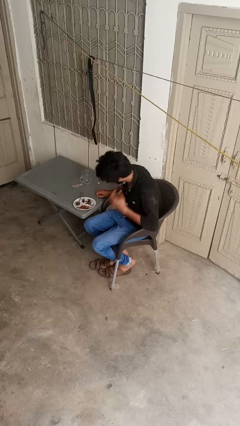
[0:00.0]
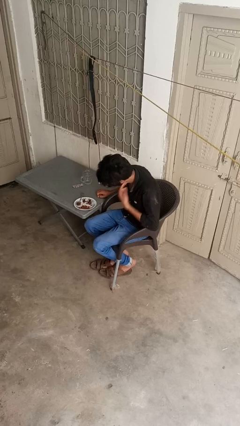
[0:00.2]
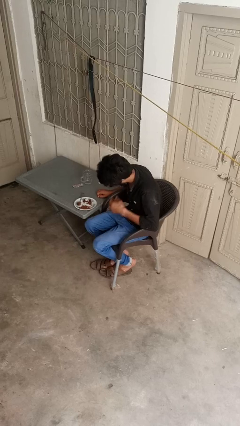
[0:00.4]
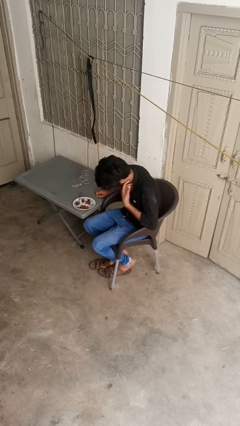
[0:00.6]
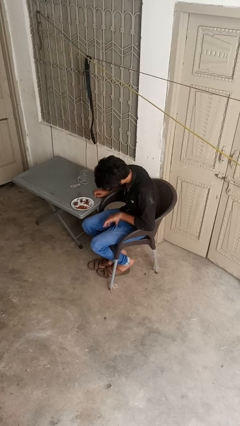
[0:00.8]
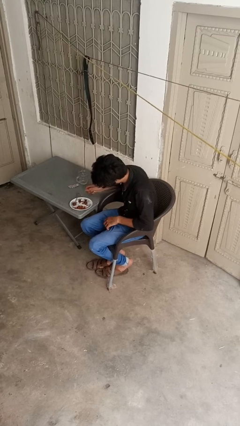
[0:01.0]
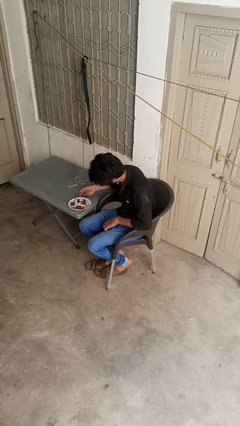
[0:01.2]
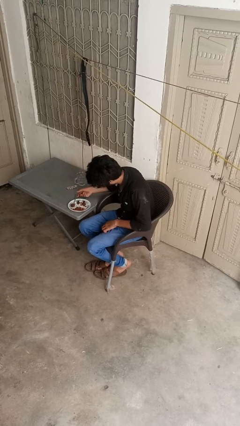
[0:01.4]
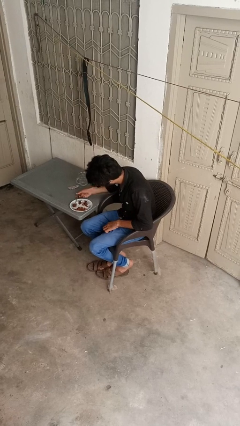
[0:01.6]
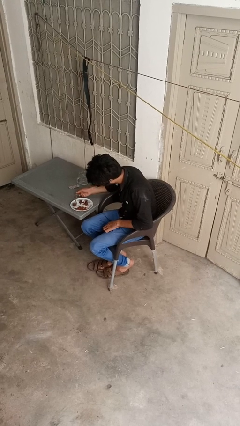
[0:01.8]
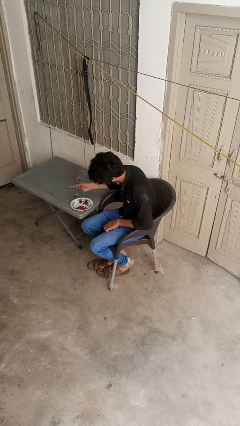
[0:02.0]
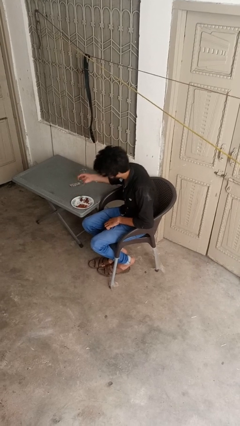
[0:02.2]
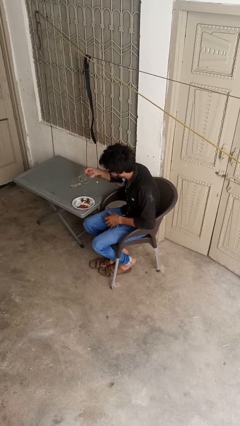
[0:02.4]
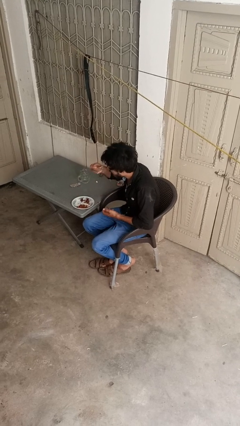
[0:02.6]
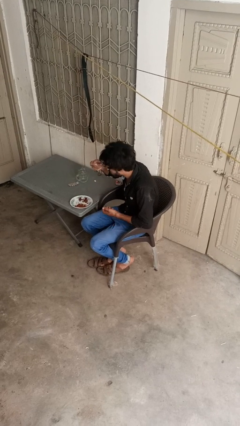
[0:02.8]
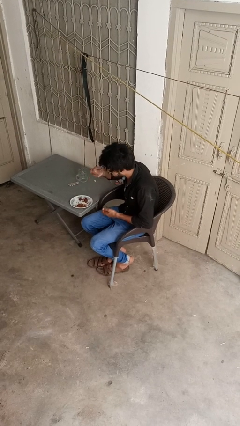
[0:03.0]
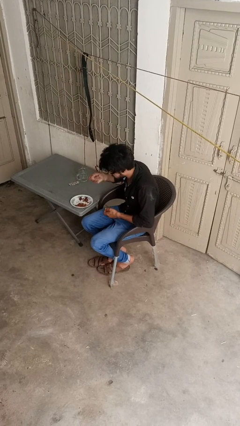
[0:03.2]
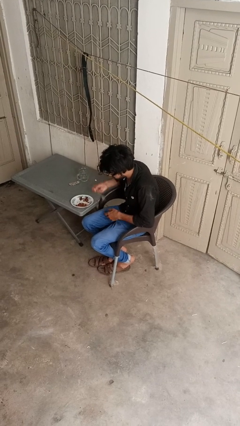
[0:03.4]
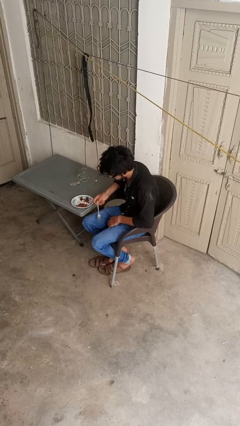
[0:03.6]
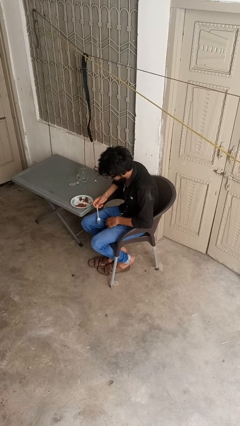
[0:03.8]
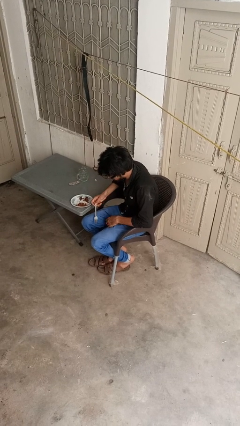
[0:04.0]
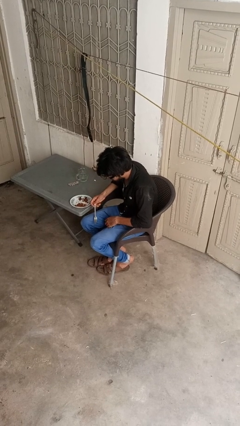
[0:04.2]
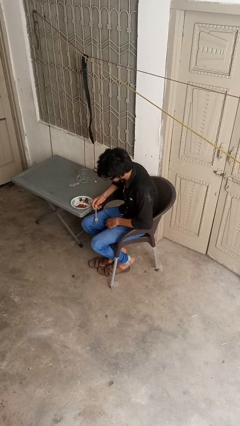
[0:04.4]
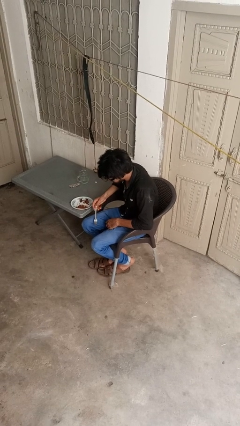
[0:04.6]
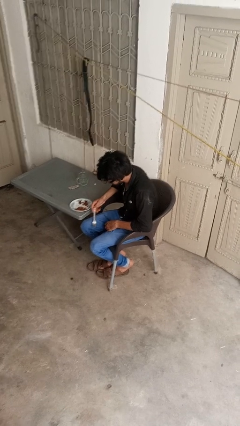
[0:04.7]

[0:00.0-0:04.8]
person eats with utensil

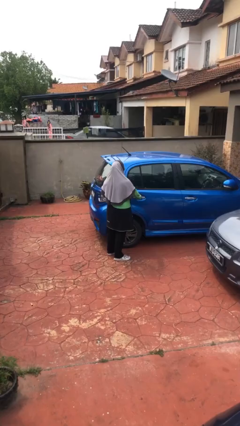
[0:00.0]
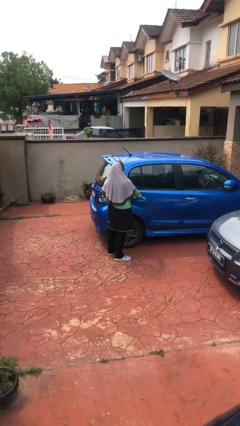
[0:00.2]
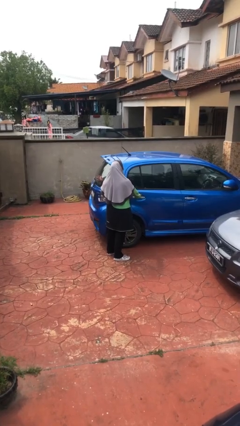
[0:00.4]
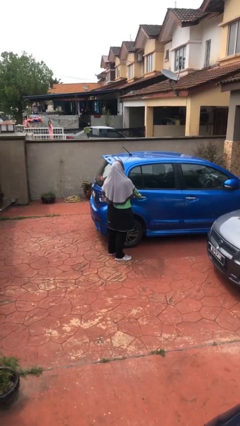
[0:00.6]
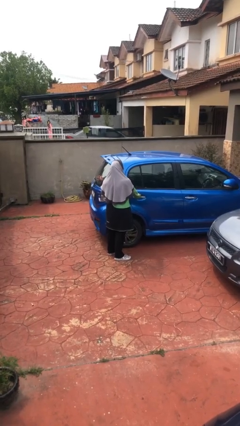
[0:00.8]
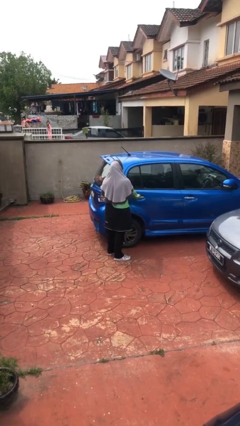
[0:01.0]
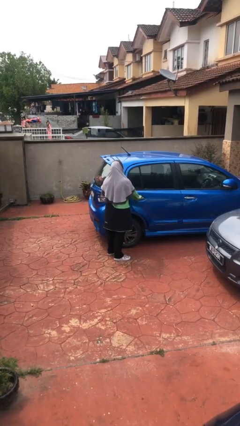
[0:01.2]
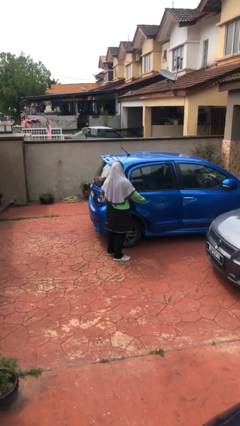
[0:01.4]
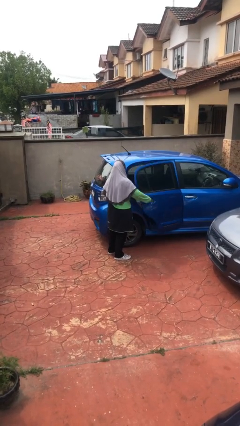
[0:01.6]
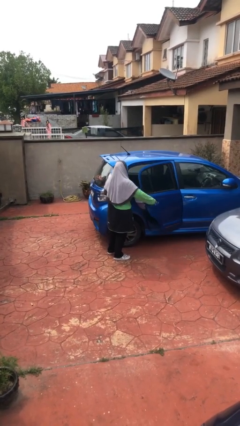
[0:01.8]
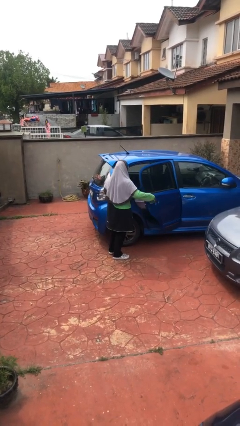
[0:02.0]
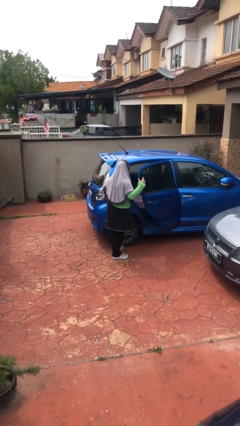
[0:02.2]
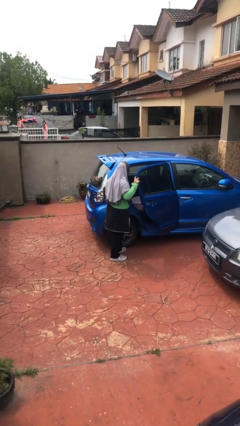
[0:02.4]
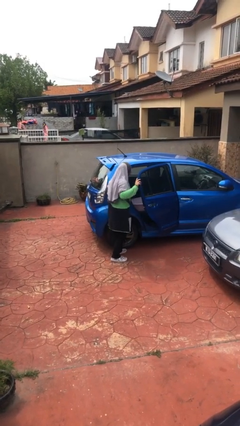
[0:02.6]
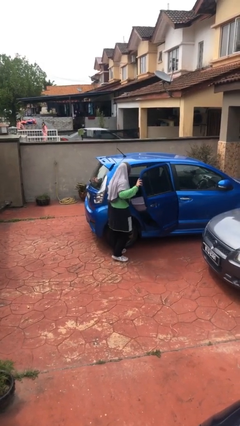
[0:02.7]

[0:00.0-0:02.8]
person opens car door

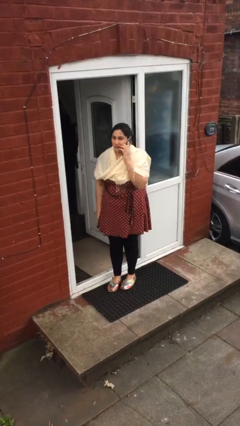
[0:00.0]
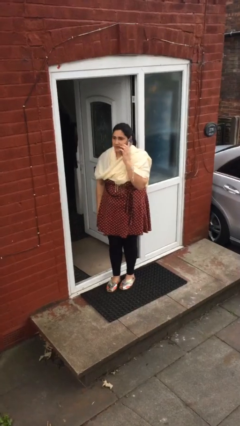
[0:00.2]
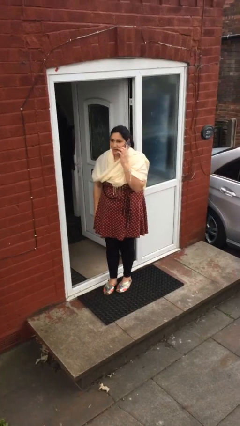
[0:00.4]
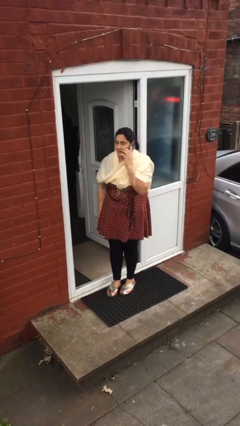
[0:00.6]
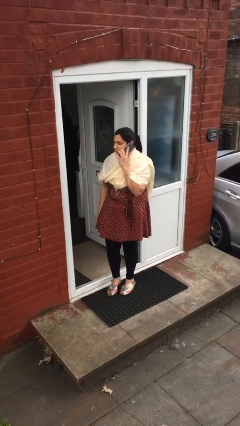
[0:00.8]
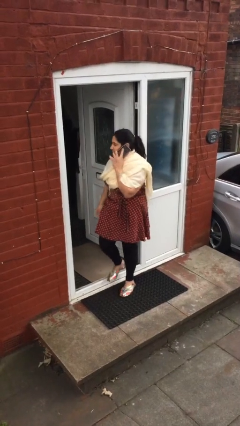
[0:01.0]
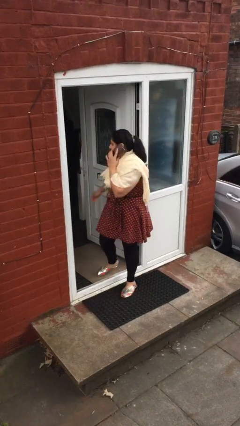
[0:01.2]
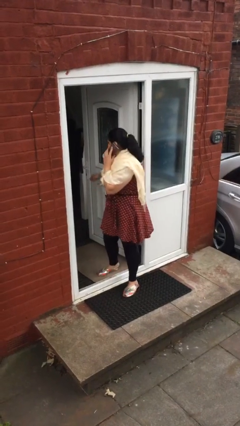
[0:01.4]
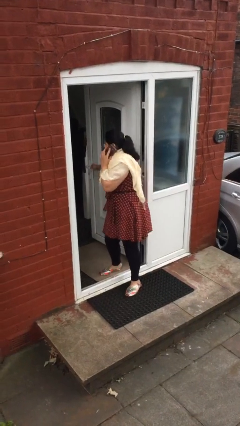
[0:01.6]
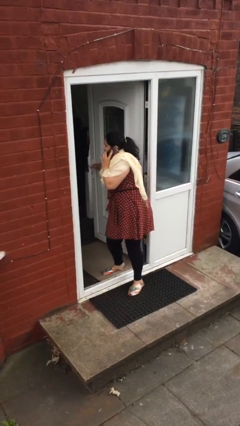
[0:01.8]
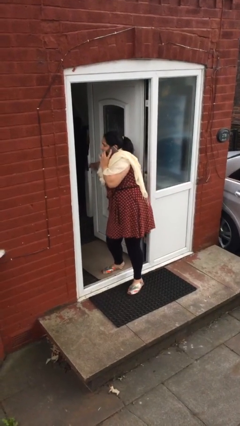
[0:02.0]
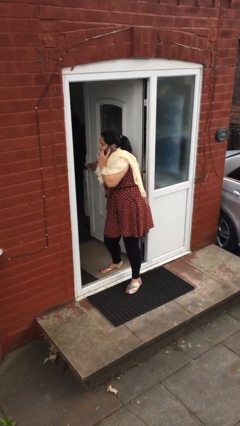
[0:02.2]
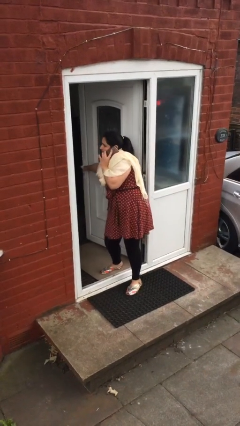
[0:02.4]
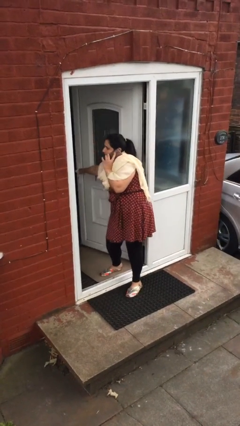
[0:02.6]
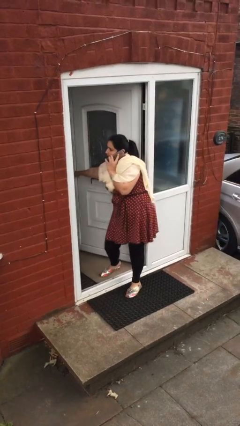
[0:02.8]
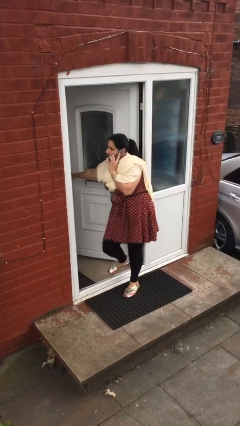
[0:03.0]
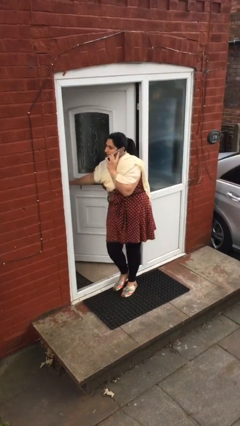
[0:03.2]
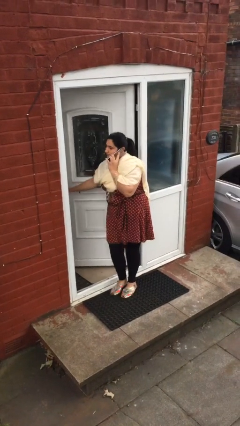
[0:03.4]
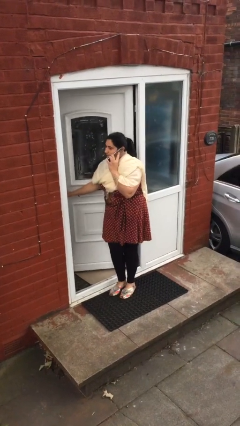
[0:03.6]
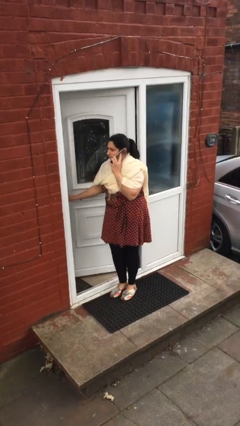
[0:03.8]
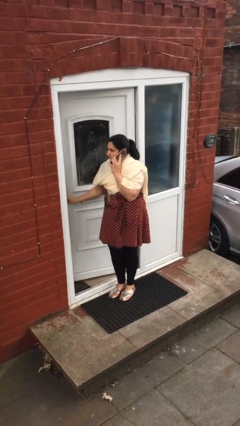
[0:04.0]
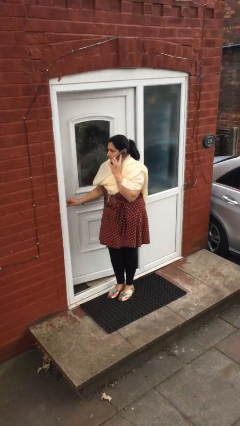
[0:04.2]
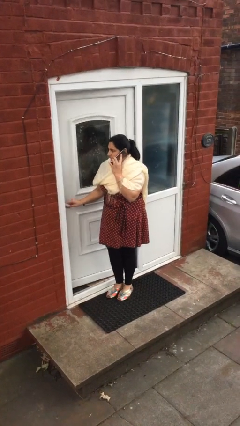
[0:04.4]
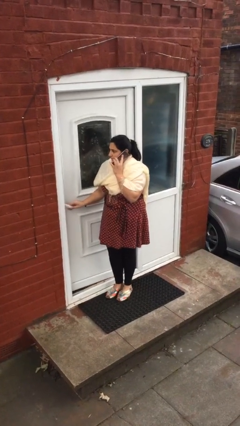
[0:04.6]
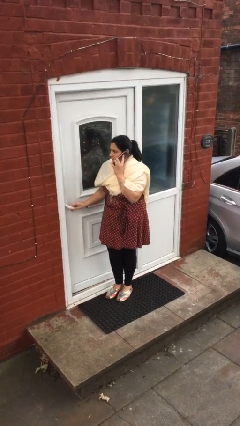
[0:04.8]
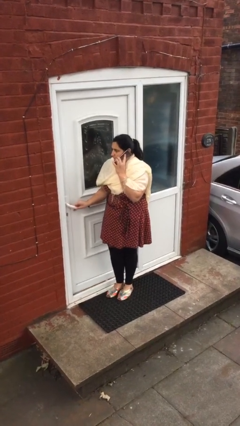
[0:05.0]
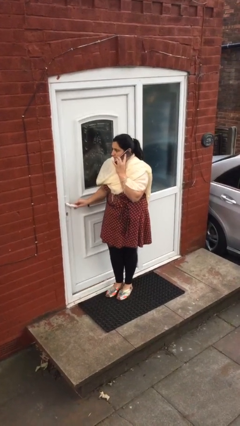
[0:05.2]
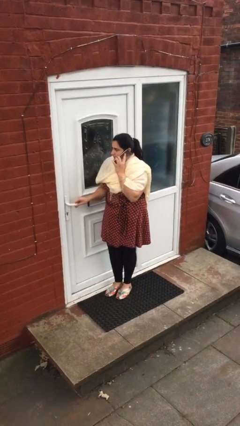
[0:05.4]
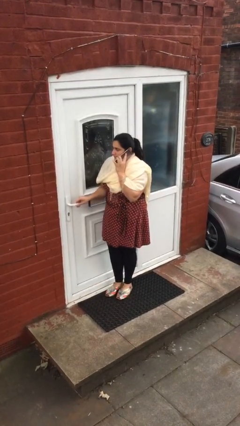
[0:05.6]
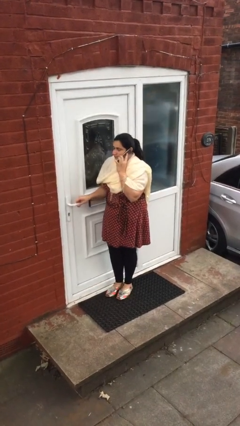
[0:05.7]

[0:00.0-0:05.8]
person closes facility door

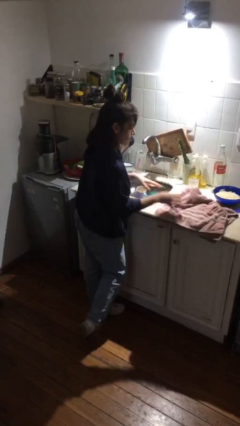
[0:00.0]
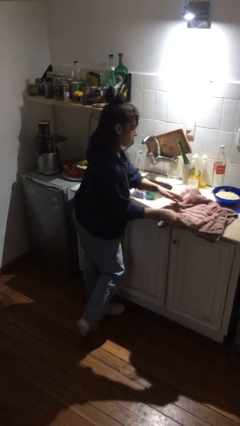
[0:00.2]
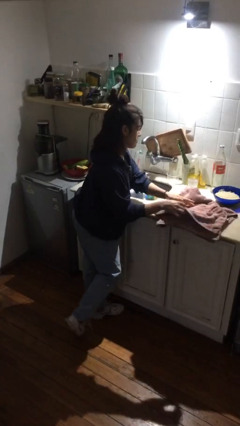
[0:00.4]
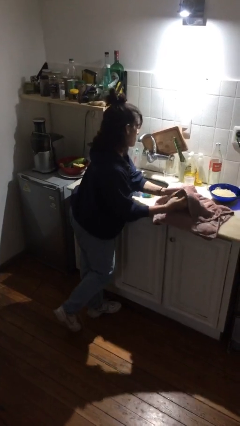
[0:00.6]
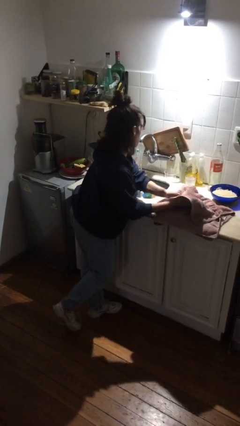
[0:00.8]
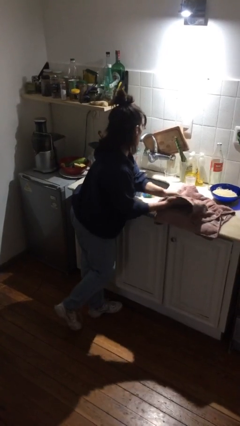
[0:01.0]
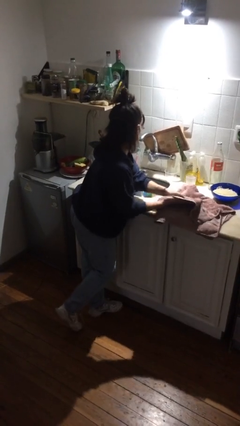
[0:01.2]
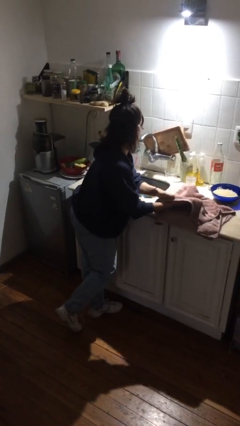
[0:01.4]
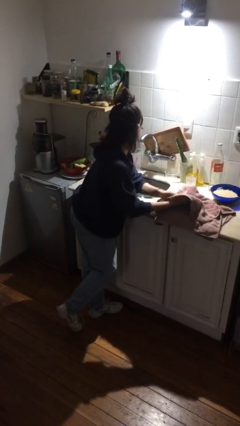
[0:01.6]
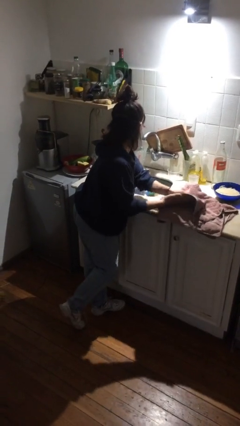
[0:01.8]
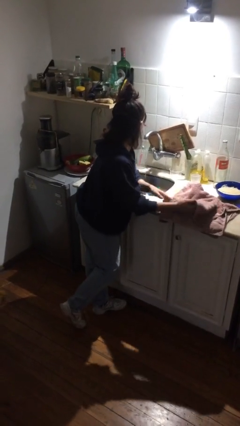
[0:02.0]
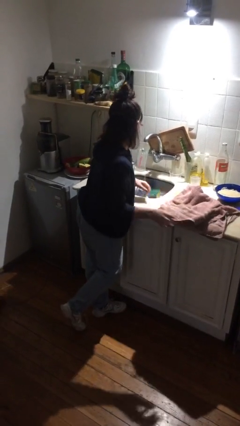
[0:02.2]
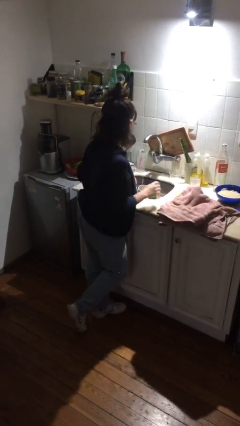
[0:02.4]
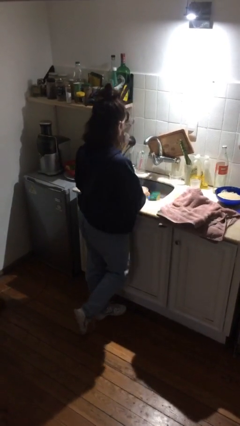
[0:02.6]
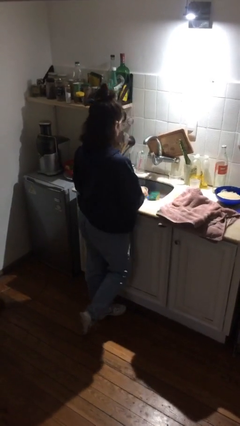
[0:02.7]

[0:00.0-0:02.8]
person dries hands with towel

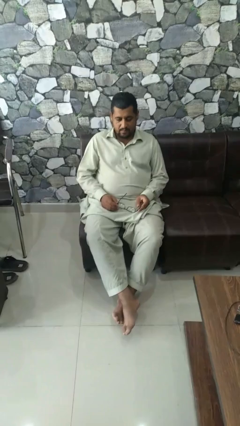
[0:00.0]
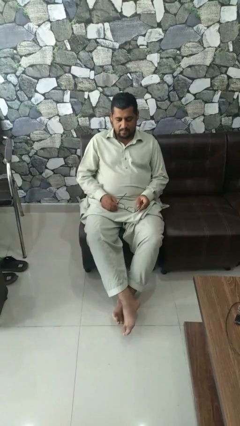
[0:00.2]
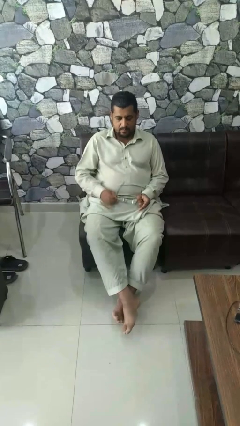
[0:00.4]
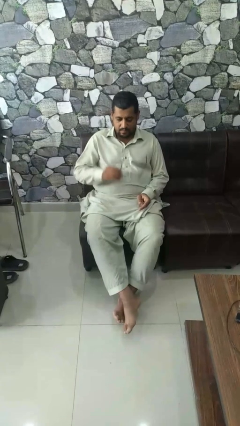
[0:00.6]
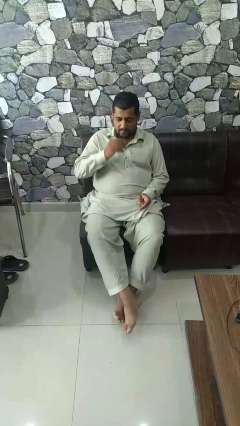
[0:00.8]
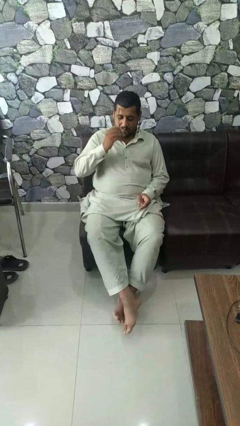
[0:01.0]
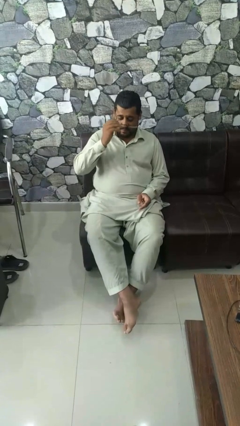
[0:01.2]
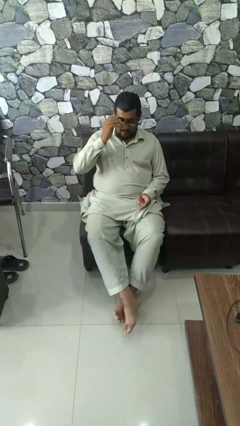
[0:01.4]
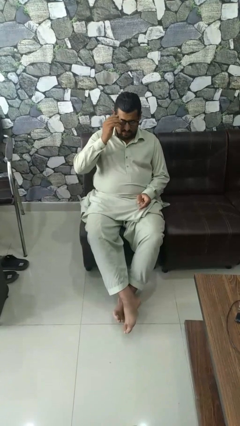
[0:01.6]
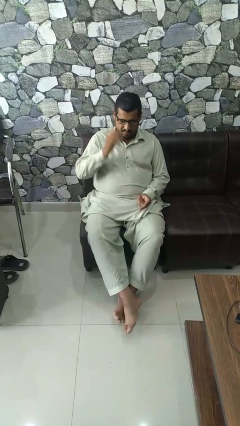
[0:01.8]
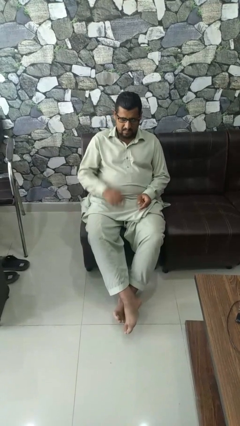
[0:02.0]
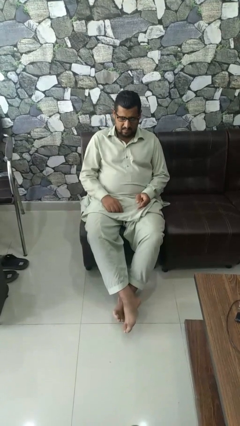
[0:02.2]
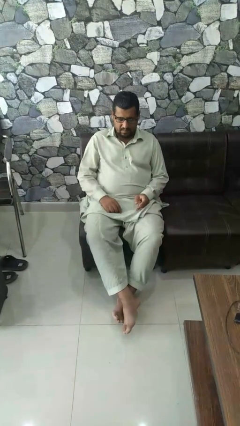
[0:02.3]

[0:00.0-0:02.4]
person puts on glasses
